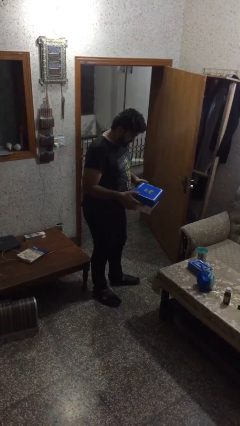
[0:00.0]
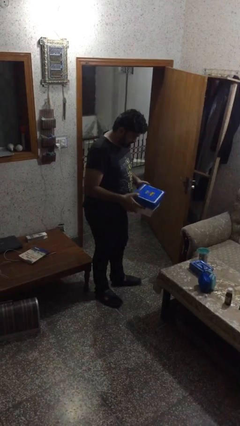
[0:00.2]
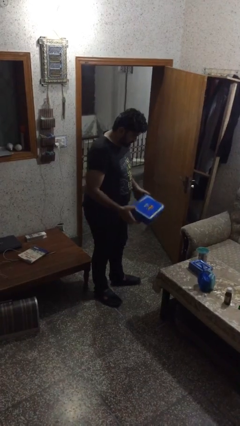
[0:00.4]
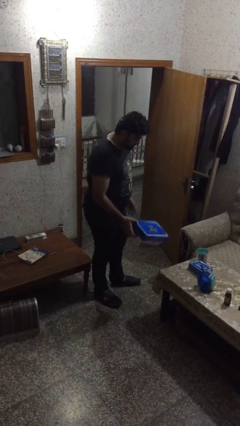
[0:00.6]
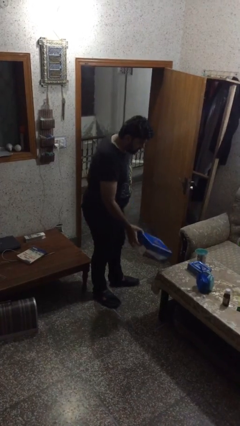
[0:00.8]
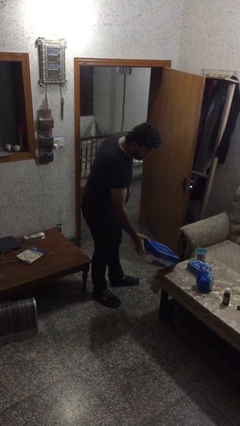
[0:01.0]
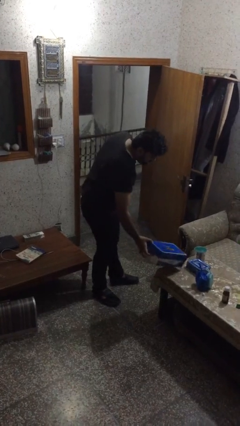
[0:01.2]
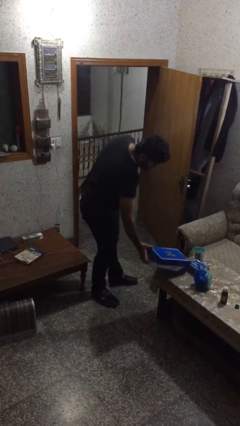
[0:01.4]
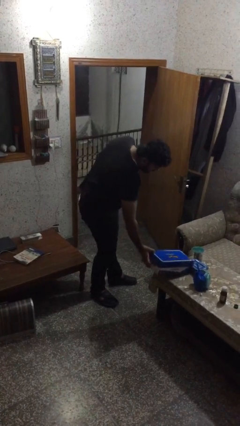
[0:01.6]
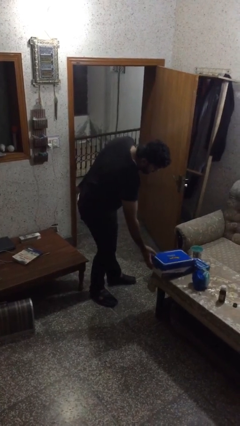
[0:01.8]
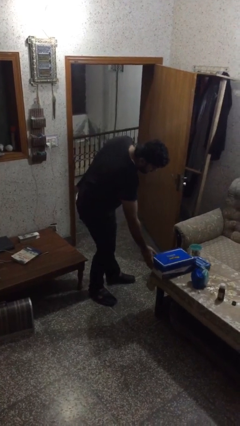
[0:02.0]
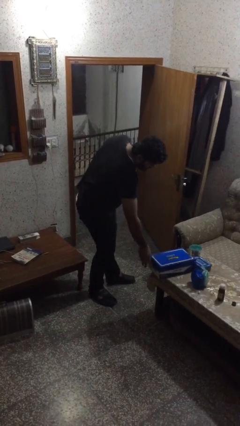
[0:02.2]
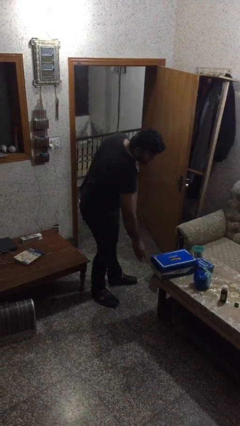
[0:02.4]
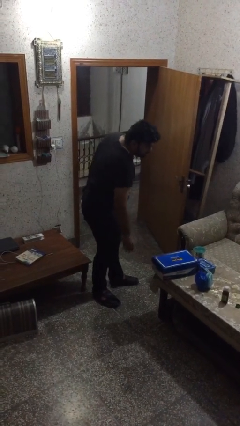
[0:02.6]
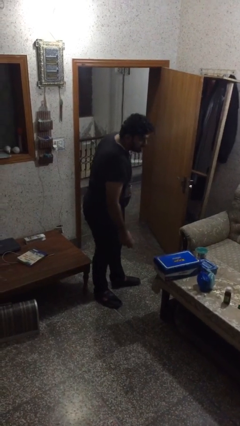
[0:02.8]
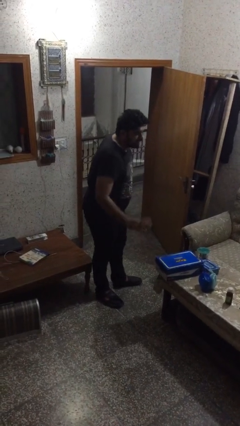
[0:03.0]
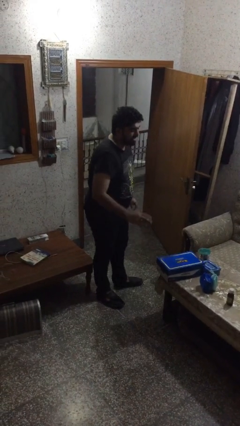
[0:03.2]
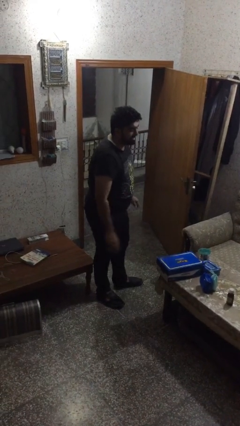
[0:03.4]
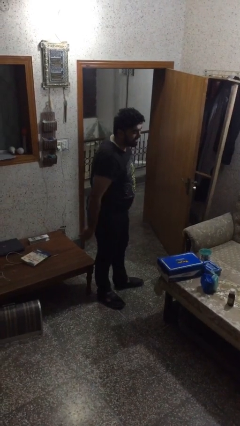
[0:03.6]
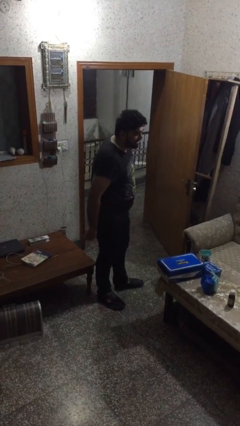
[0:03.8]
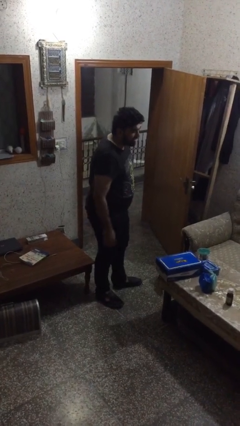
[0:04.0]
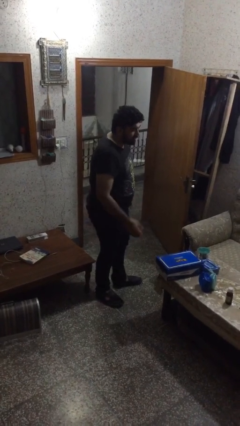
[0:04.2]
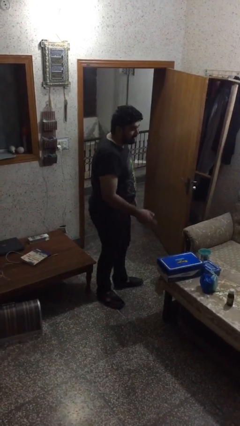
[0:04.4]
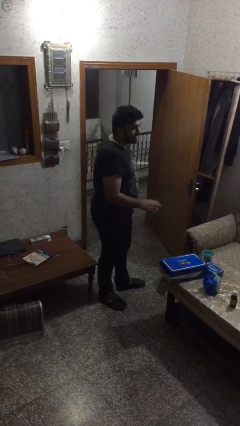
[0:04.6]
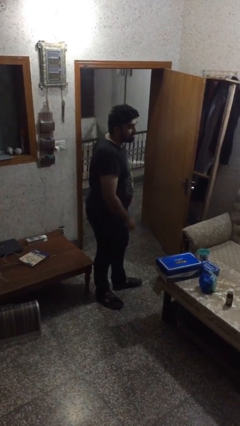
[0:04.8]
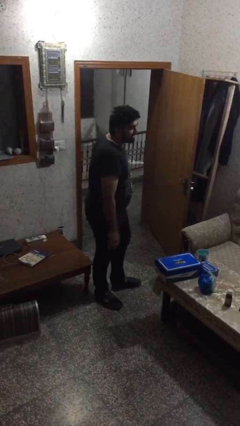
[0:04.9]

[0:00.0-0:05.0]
person puts down object on table

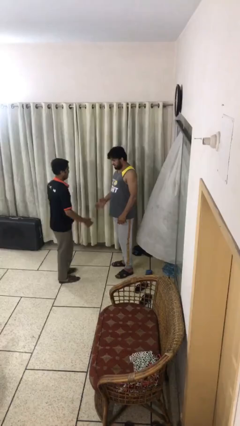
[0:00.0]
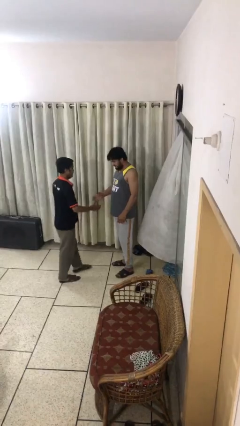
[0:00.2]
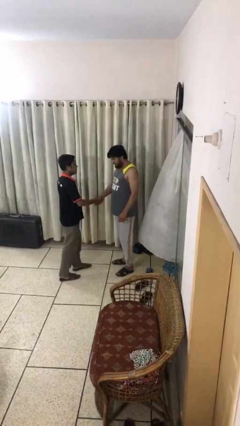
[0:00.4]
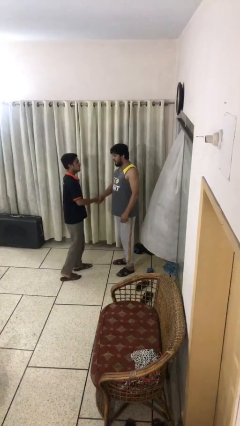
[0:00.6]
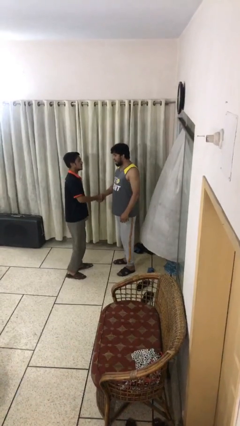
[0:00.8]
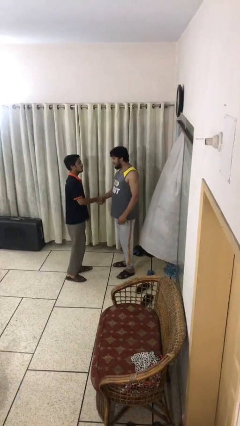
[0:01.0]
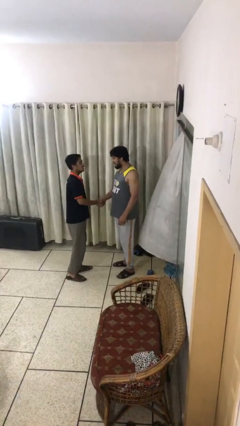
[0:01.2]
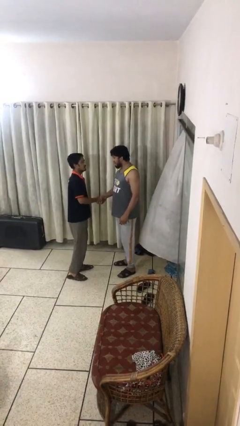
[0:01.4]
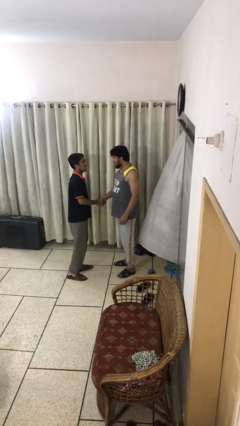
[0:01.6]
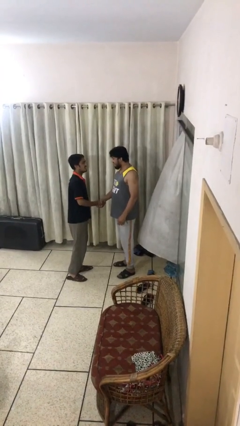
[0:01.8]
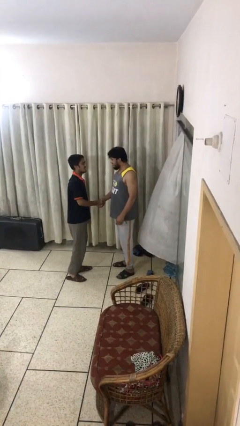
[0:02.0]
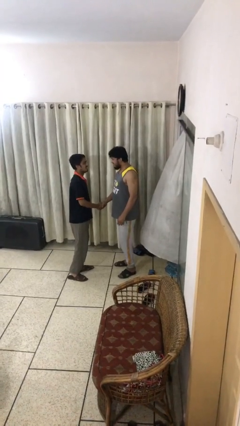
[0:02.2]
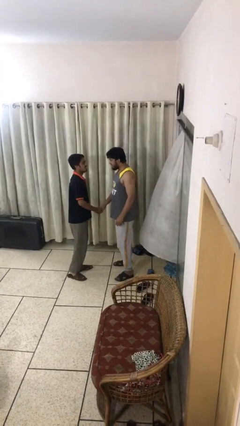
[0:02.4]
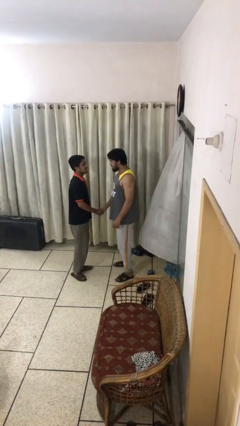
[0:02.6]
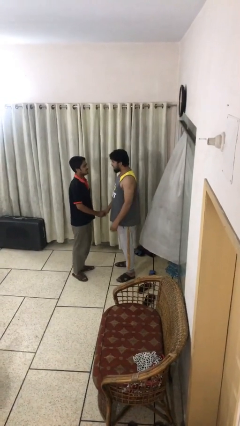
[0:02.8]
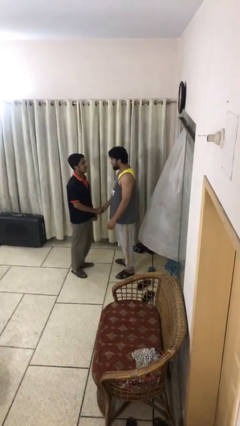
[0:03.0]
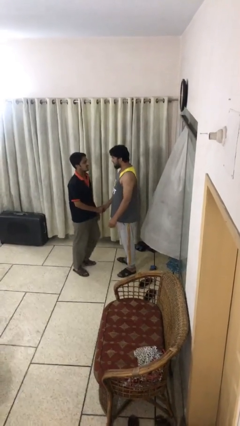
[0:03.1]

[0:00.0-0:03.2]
person shakes hand

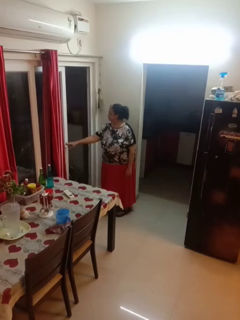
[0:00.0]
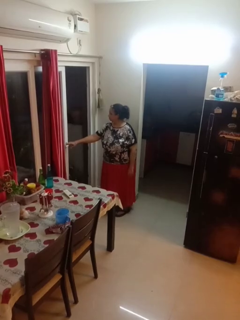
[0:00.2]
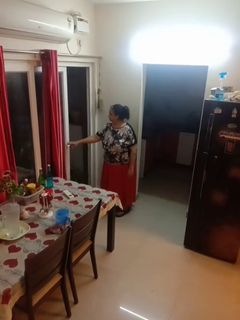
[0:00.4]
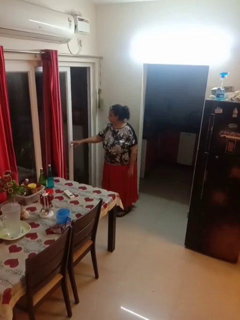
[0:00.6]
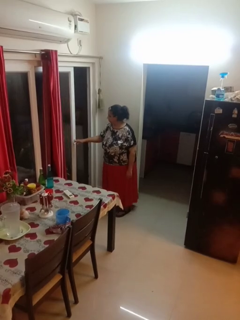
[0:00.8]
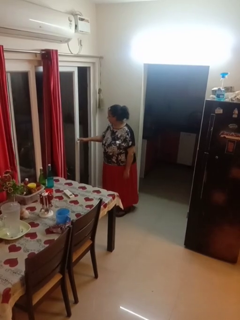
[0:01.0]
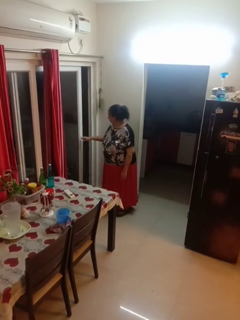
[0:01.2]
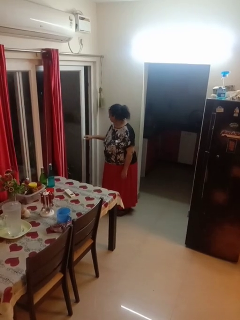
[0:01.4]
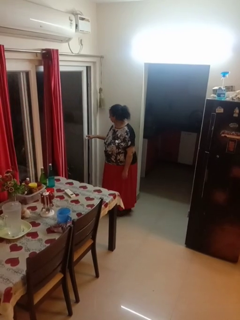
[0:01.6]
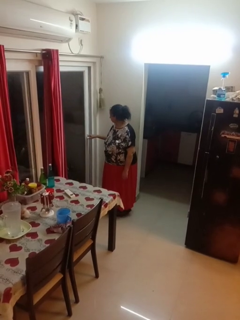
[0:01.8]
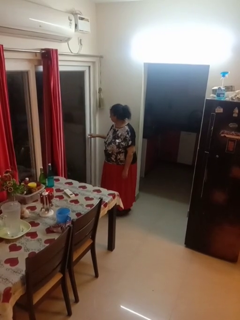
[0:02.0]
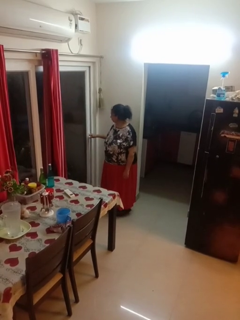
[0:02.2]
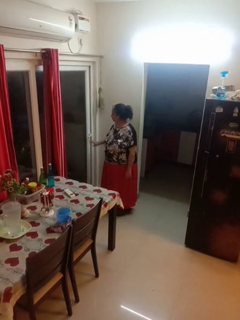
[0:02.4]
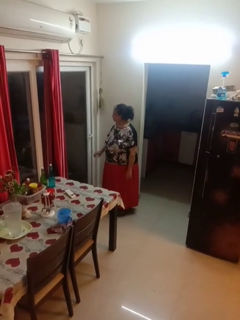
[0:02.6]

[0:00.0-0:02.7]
person closes sliding door

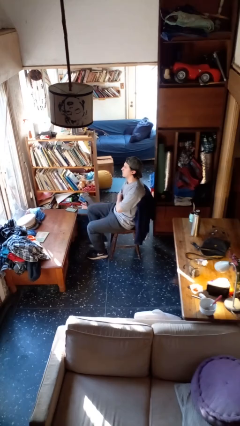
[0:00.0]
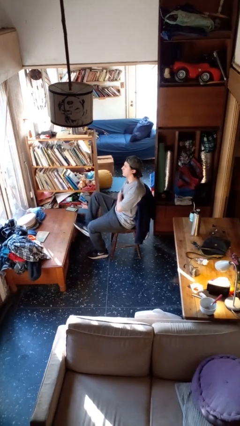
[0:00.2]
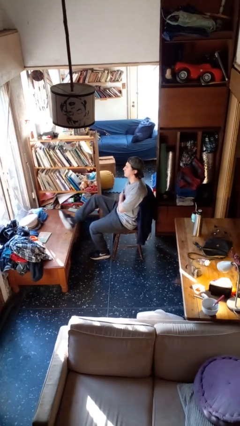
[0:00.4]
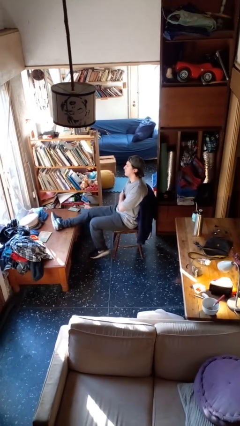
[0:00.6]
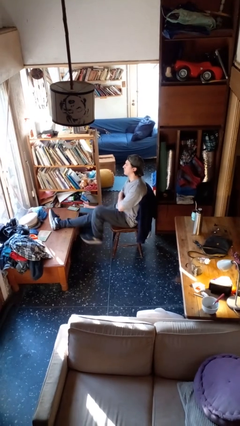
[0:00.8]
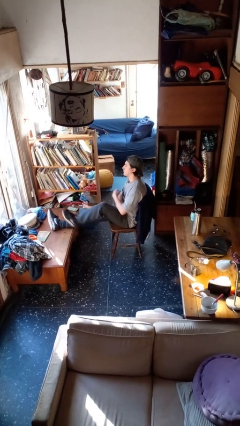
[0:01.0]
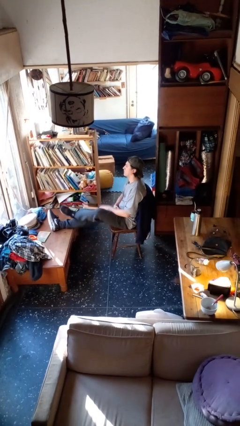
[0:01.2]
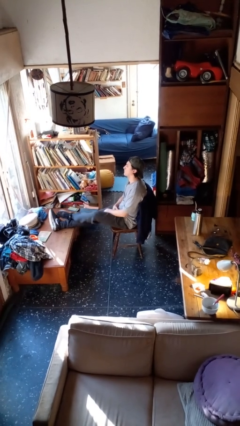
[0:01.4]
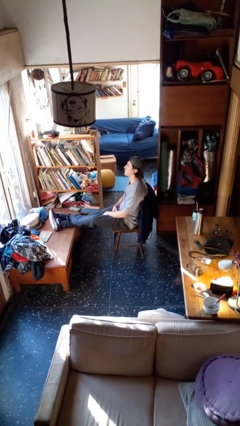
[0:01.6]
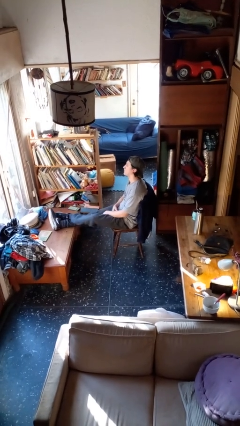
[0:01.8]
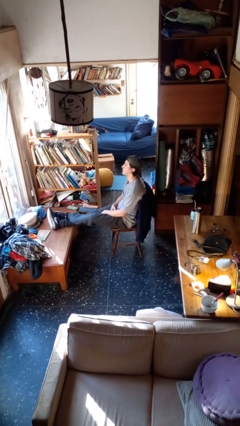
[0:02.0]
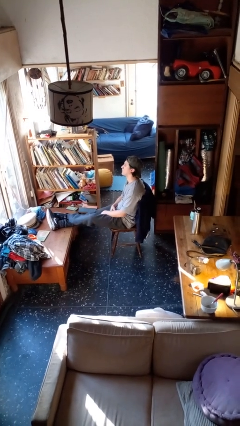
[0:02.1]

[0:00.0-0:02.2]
person puts feet up

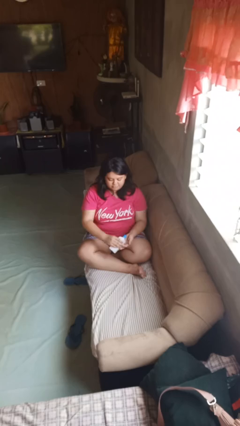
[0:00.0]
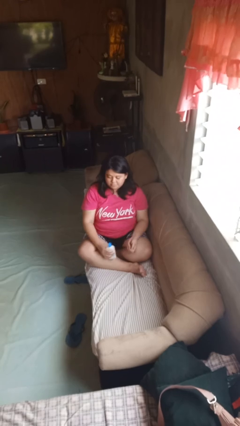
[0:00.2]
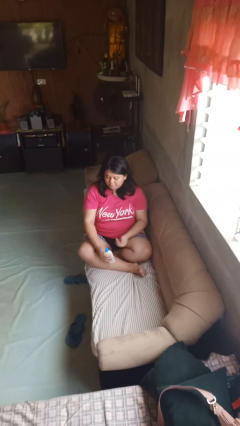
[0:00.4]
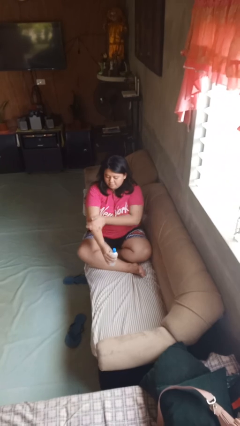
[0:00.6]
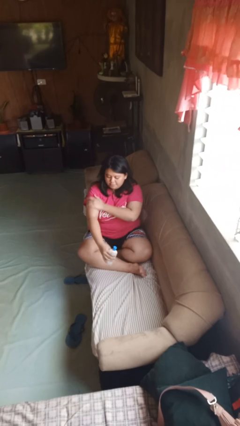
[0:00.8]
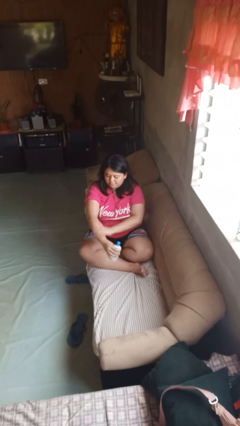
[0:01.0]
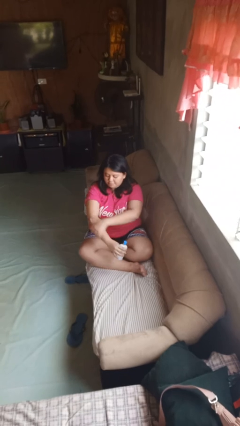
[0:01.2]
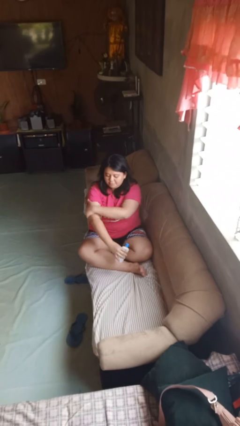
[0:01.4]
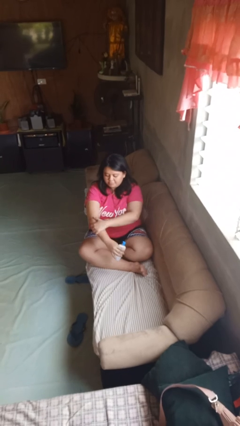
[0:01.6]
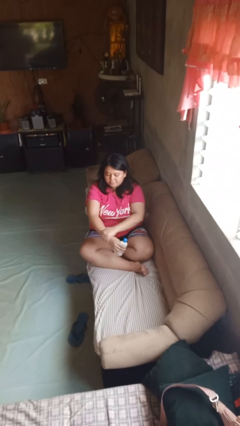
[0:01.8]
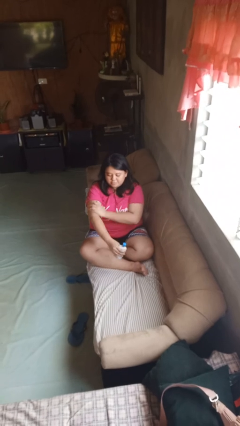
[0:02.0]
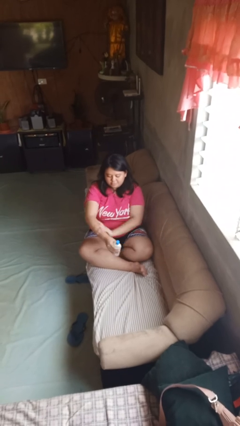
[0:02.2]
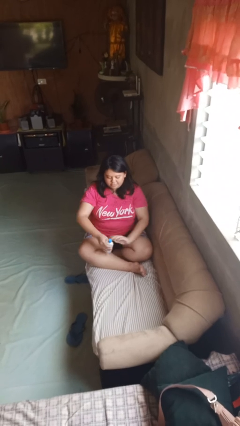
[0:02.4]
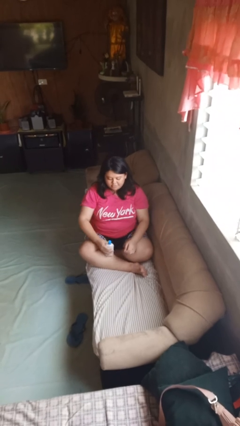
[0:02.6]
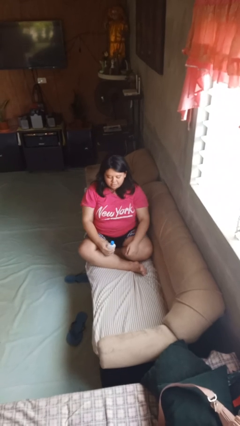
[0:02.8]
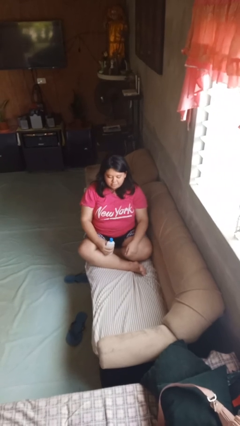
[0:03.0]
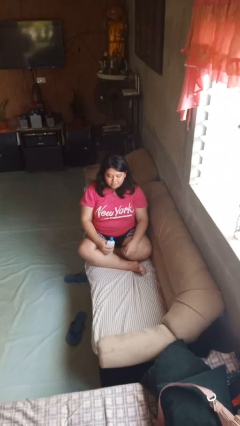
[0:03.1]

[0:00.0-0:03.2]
person applies sunscreen

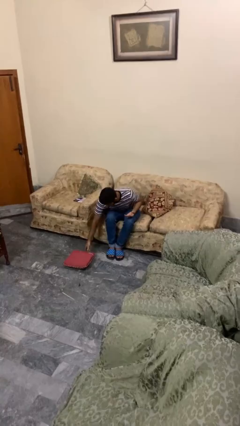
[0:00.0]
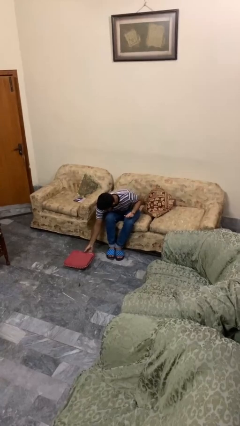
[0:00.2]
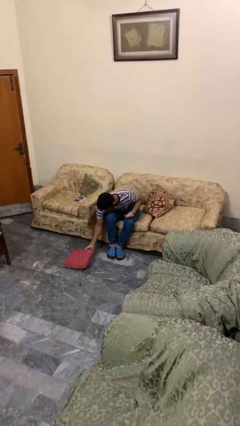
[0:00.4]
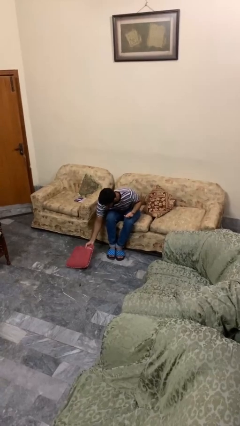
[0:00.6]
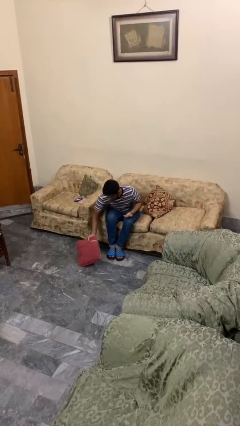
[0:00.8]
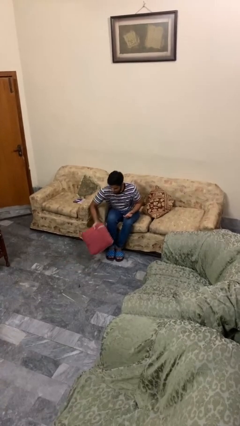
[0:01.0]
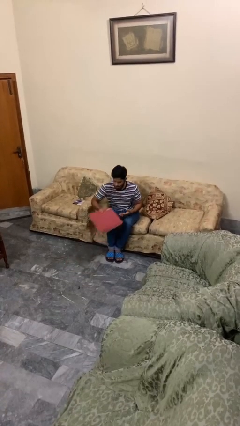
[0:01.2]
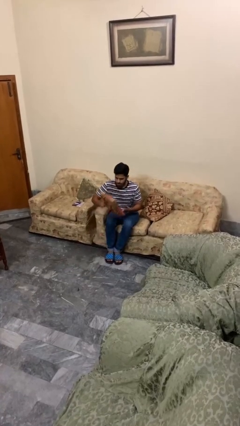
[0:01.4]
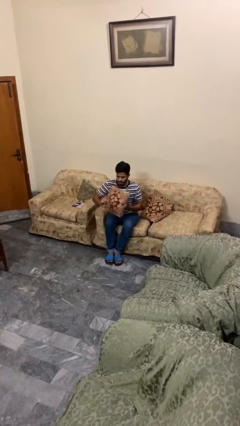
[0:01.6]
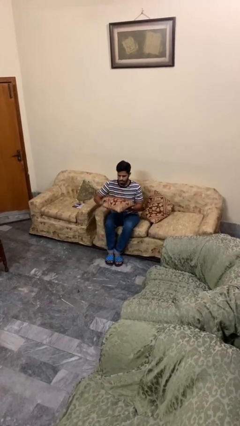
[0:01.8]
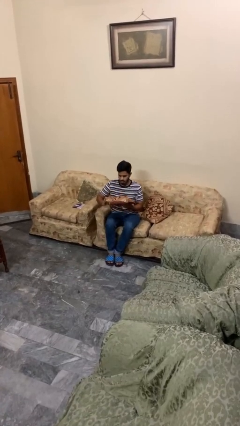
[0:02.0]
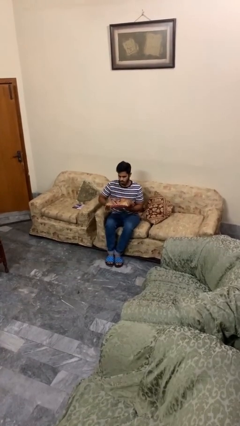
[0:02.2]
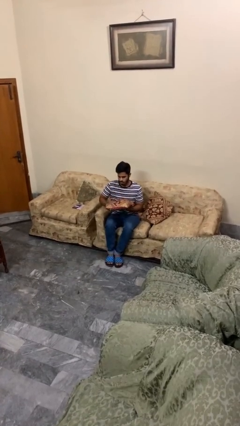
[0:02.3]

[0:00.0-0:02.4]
person picks up object from floor
